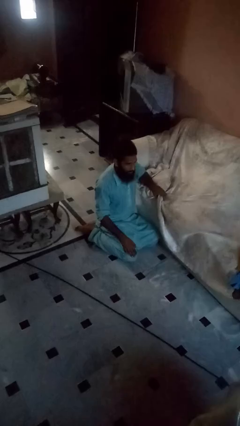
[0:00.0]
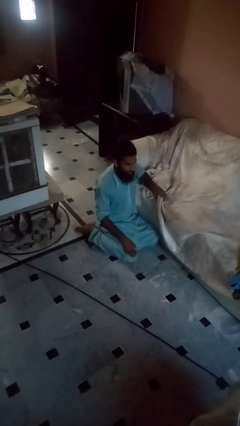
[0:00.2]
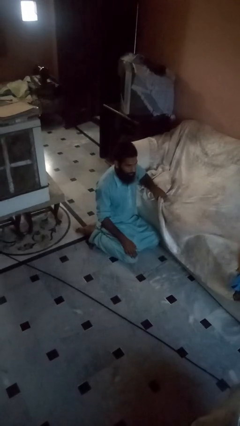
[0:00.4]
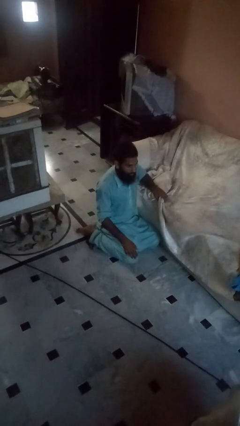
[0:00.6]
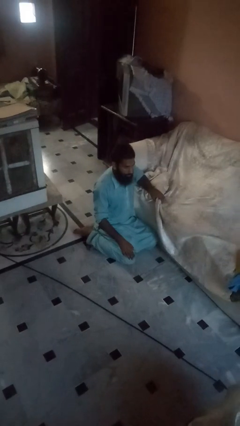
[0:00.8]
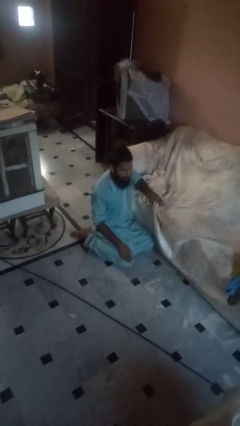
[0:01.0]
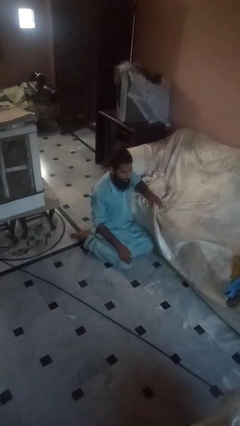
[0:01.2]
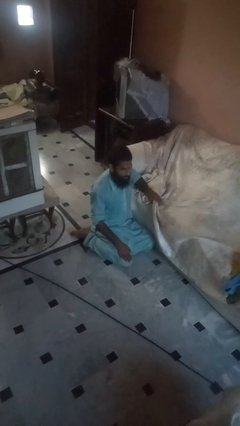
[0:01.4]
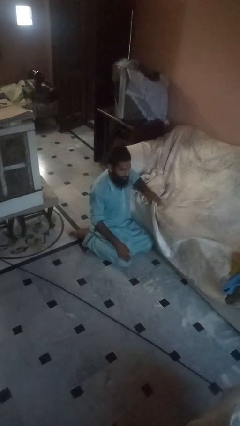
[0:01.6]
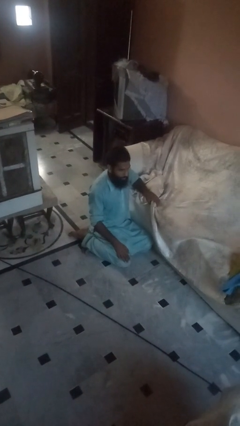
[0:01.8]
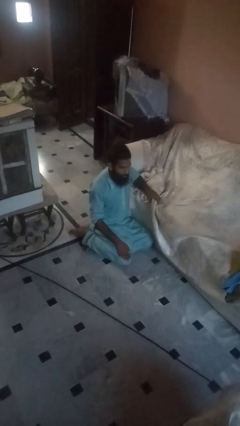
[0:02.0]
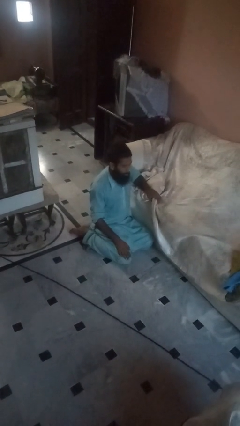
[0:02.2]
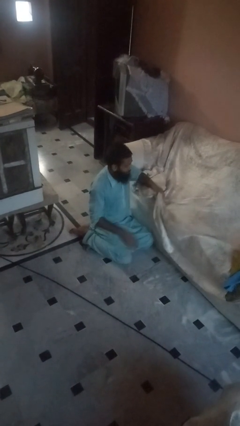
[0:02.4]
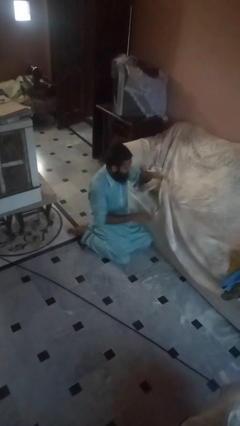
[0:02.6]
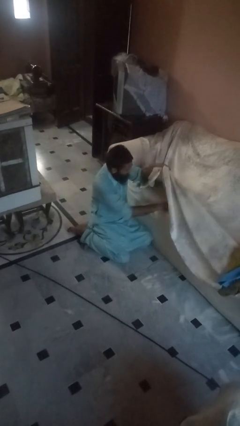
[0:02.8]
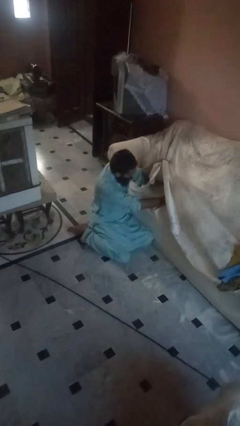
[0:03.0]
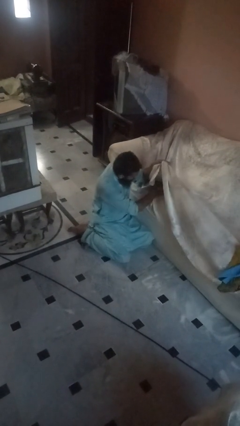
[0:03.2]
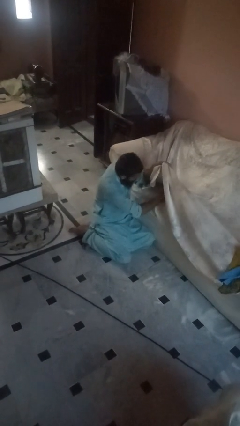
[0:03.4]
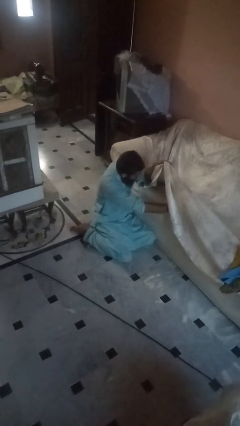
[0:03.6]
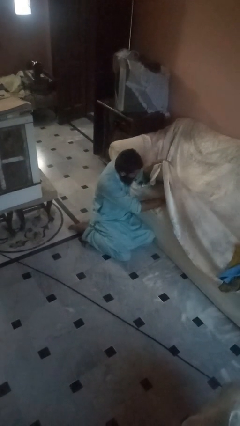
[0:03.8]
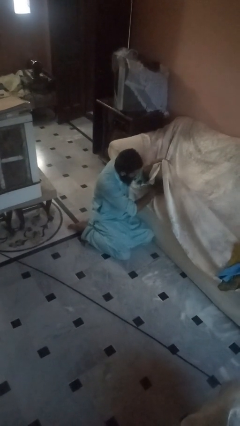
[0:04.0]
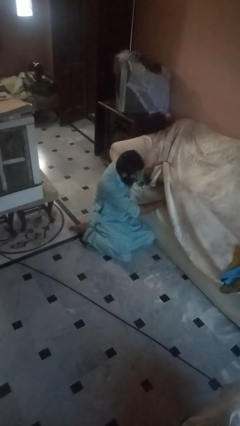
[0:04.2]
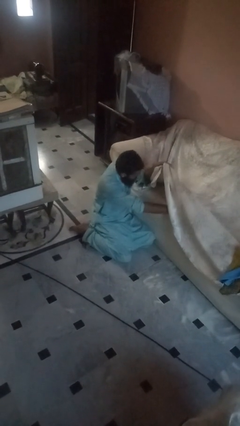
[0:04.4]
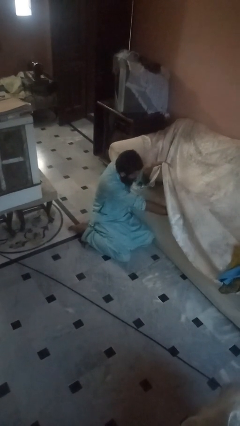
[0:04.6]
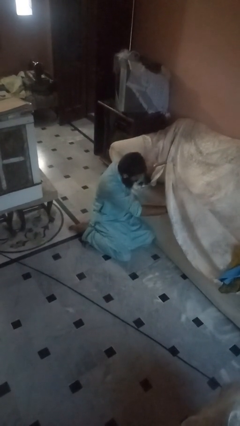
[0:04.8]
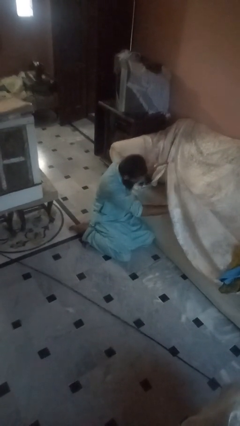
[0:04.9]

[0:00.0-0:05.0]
person searches under couch

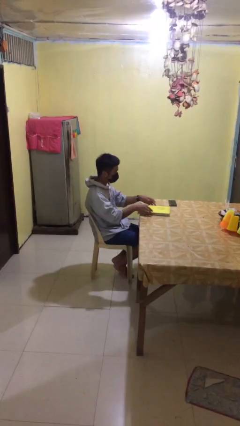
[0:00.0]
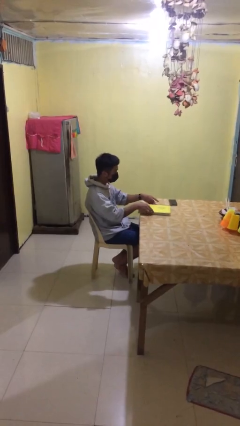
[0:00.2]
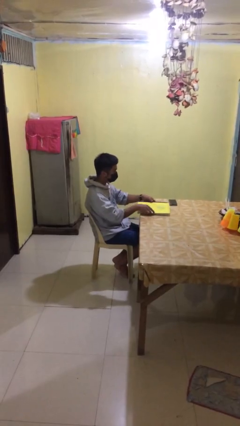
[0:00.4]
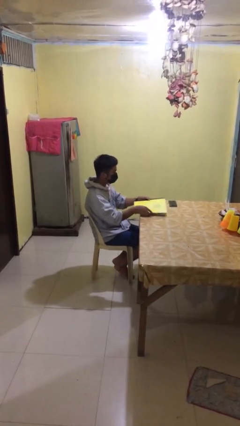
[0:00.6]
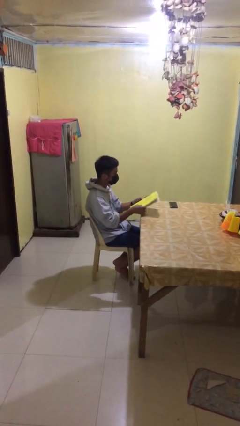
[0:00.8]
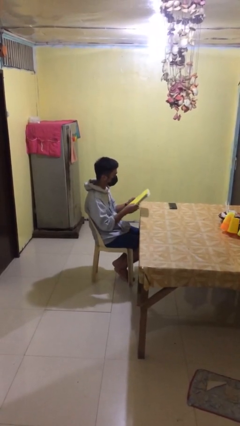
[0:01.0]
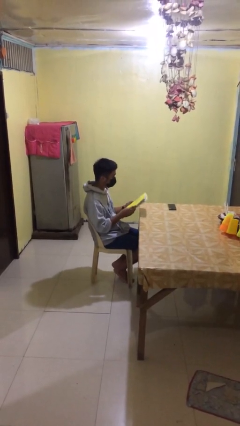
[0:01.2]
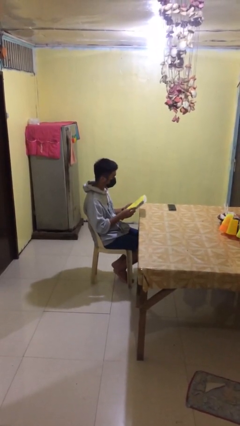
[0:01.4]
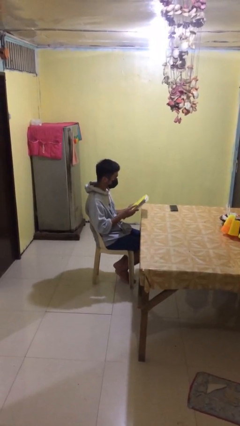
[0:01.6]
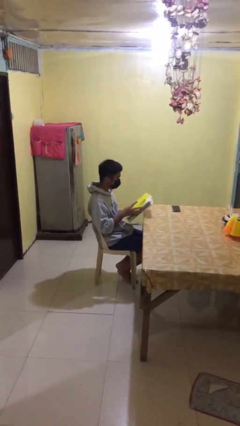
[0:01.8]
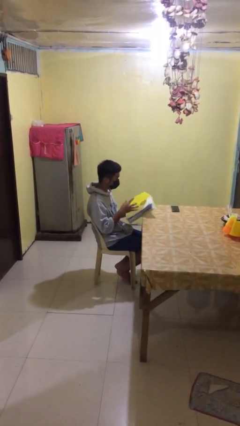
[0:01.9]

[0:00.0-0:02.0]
person picks up object from table

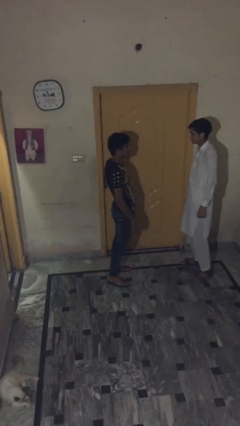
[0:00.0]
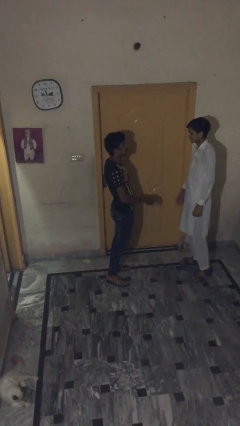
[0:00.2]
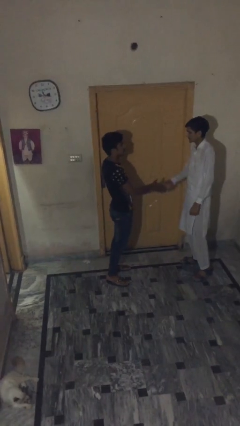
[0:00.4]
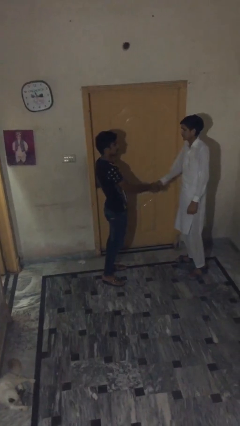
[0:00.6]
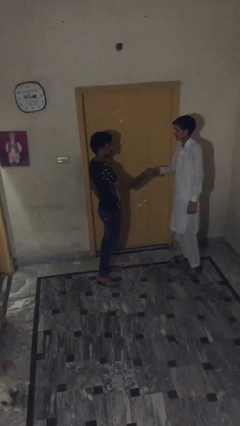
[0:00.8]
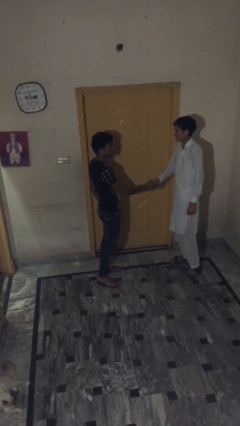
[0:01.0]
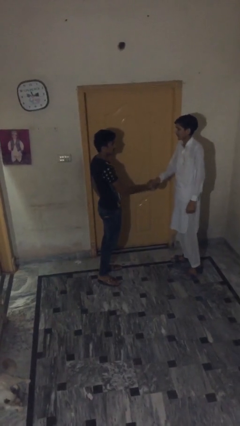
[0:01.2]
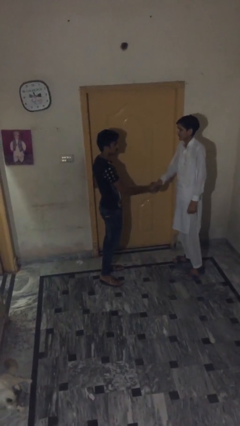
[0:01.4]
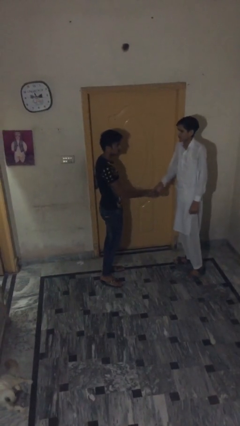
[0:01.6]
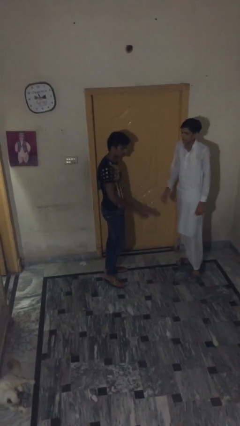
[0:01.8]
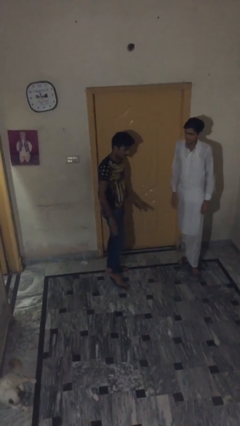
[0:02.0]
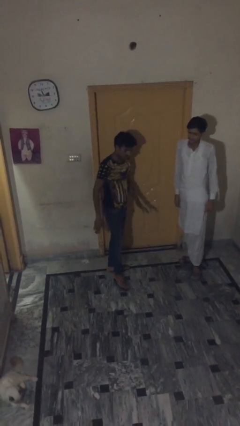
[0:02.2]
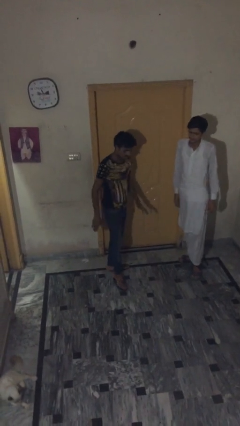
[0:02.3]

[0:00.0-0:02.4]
person shakes hand

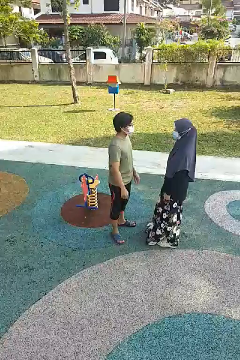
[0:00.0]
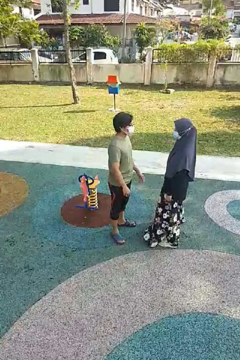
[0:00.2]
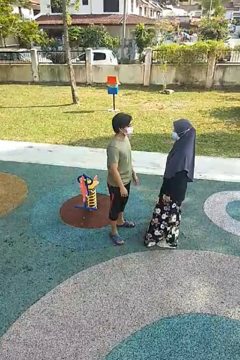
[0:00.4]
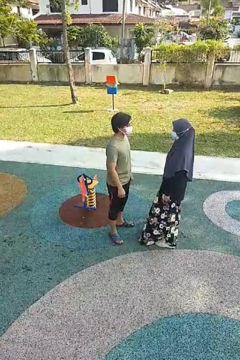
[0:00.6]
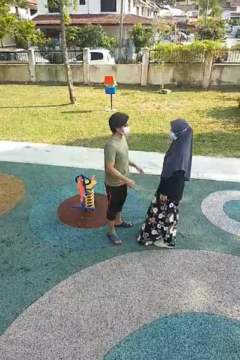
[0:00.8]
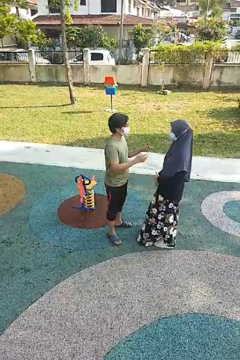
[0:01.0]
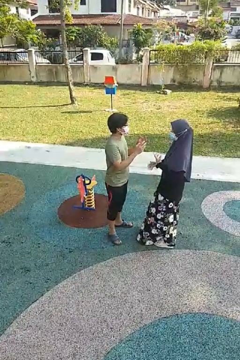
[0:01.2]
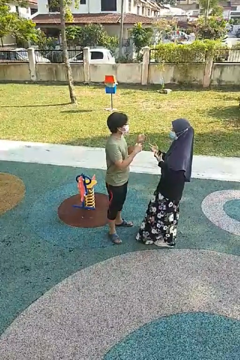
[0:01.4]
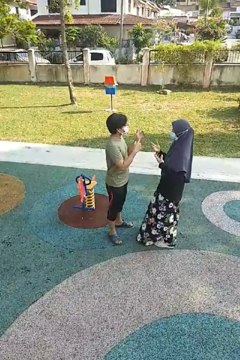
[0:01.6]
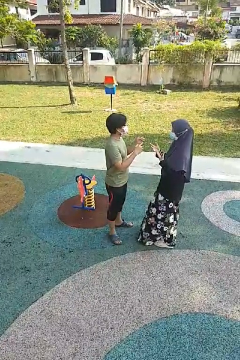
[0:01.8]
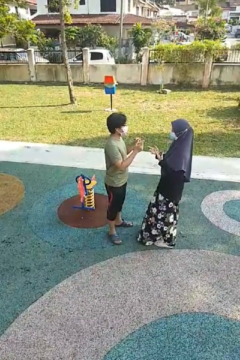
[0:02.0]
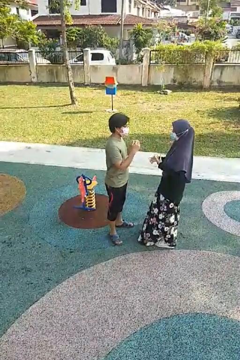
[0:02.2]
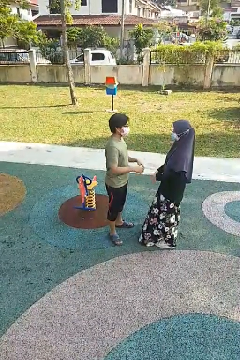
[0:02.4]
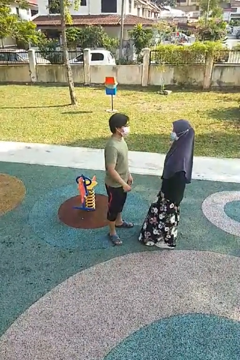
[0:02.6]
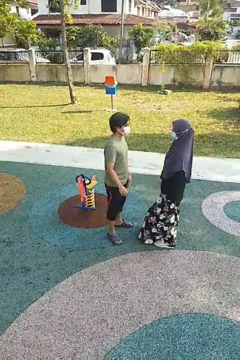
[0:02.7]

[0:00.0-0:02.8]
person talks to person

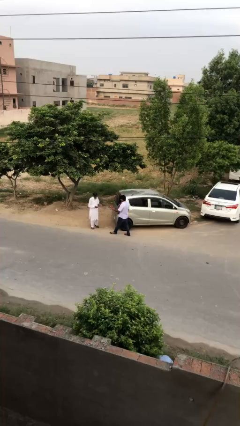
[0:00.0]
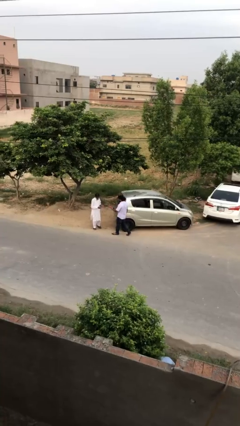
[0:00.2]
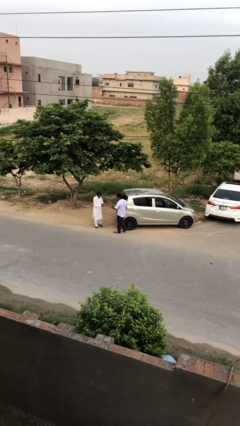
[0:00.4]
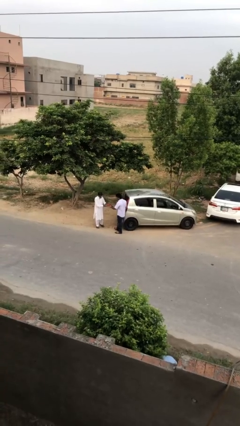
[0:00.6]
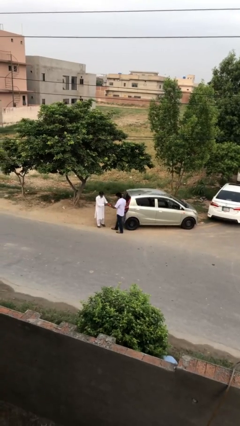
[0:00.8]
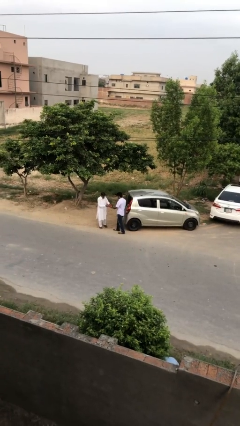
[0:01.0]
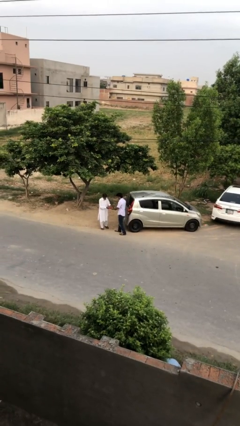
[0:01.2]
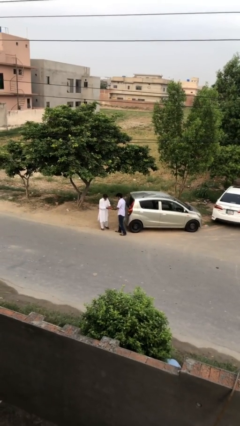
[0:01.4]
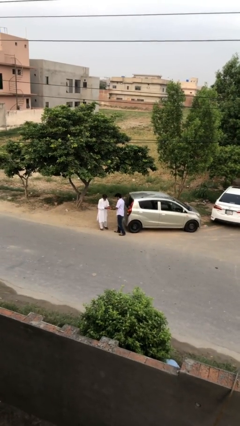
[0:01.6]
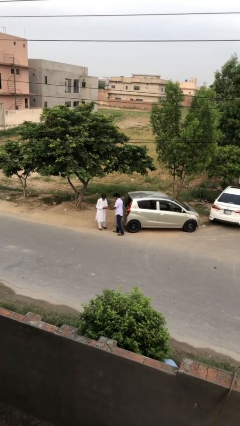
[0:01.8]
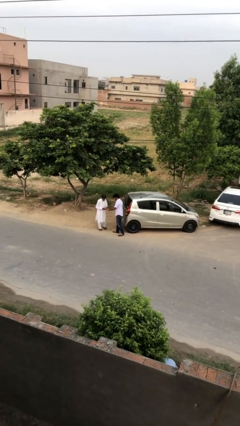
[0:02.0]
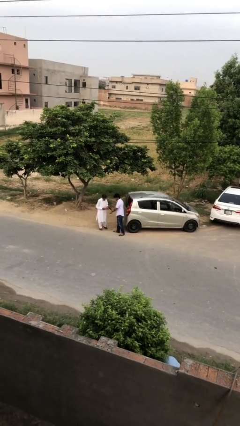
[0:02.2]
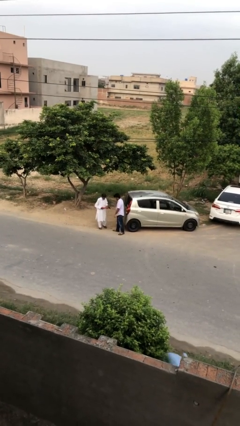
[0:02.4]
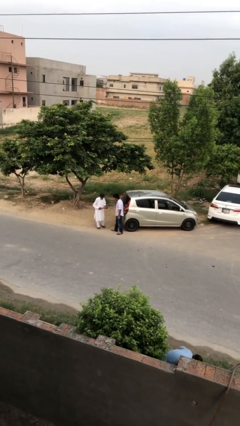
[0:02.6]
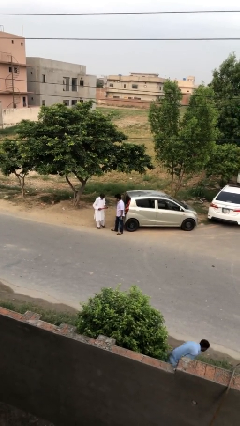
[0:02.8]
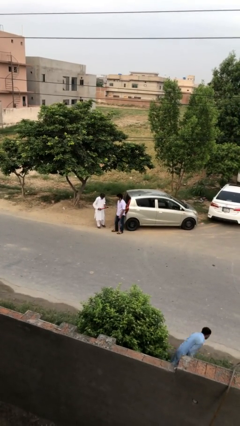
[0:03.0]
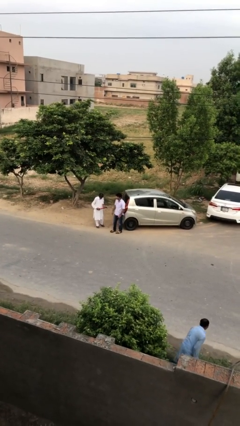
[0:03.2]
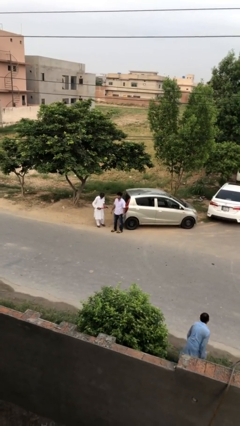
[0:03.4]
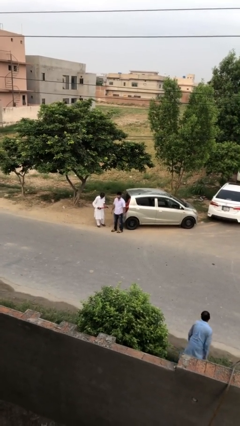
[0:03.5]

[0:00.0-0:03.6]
person transfers object to person

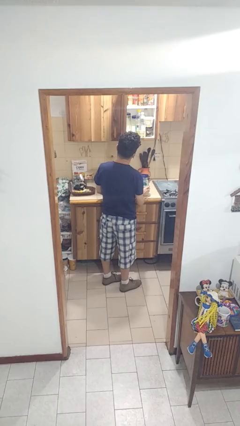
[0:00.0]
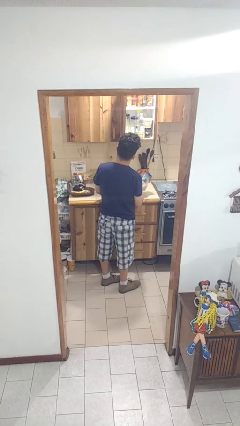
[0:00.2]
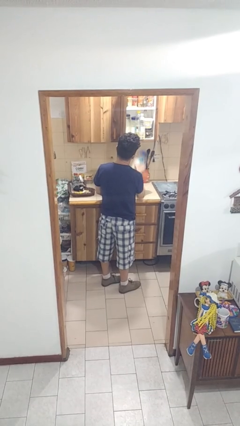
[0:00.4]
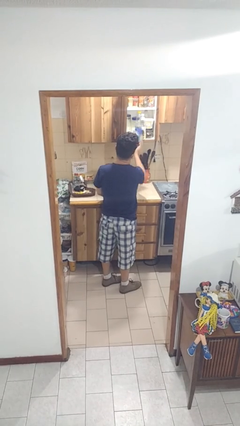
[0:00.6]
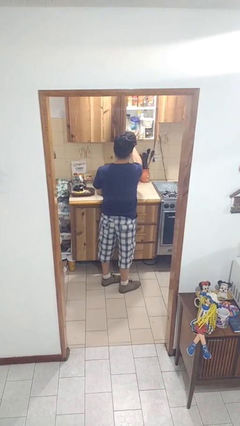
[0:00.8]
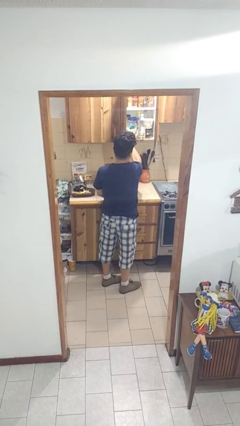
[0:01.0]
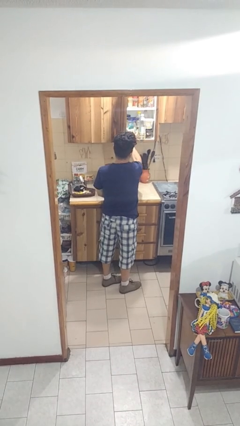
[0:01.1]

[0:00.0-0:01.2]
person puts object in cabinet

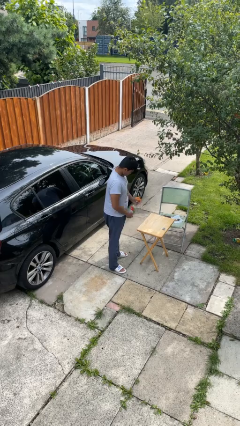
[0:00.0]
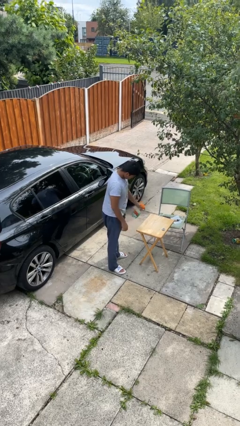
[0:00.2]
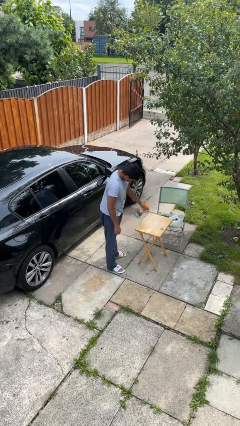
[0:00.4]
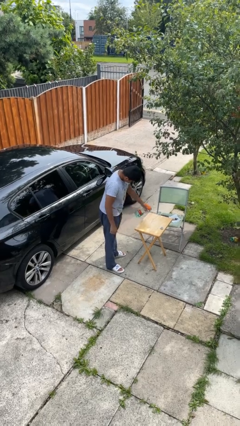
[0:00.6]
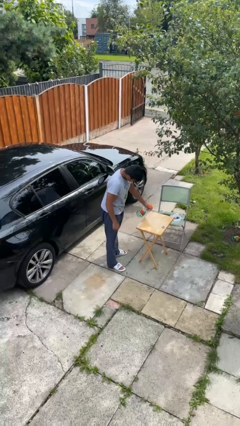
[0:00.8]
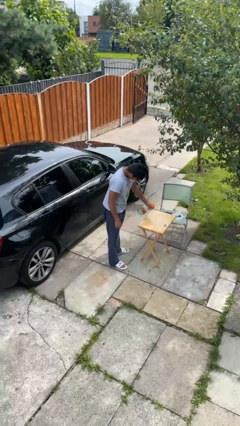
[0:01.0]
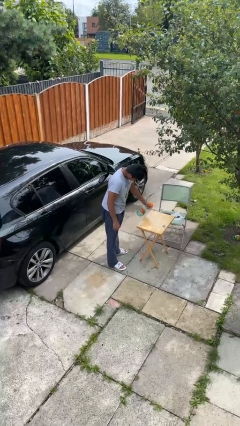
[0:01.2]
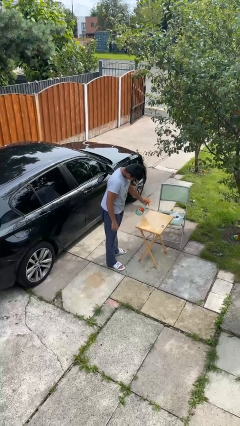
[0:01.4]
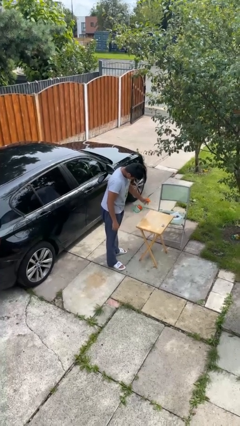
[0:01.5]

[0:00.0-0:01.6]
person sprays from bottle
